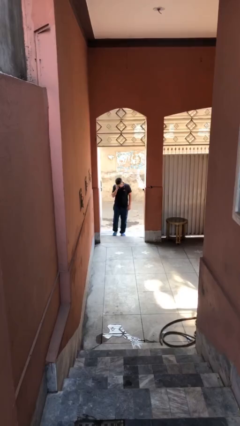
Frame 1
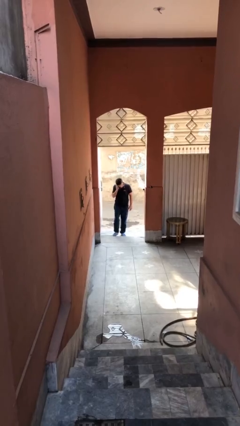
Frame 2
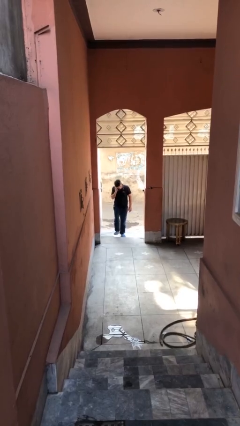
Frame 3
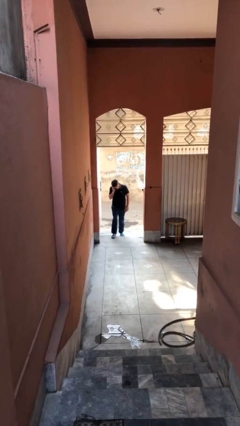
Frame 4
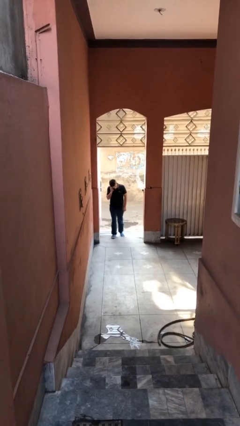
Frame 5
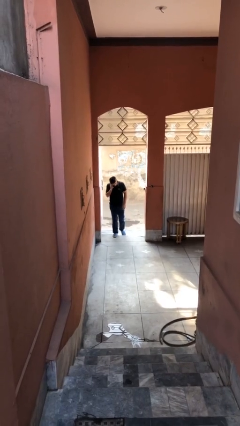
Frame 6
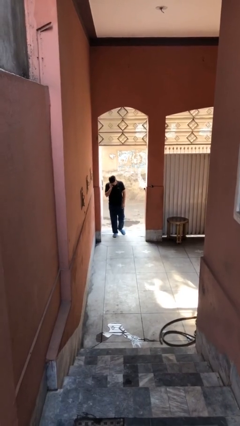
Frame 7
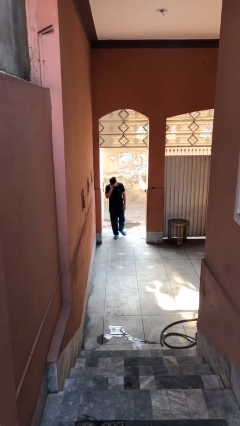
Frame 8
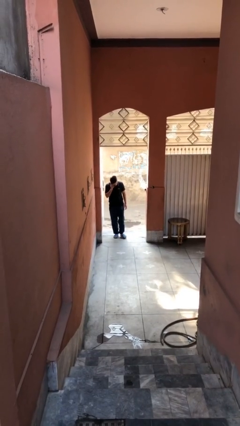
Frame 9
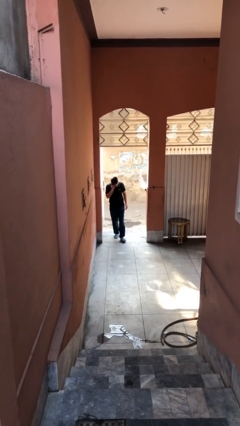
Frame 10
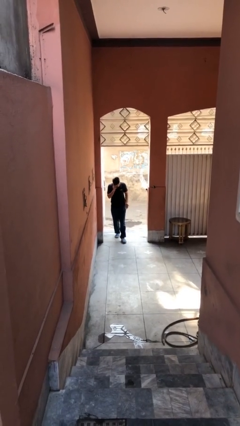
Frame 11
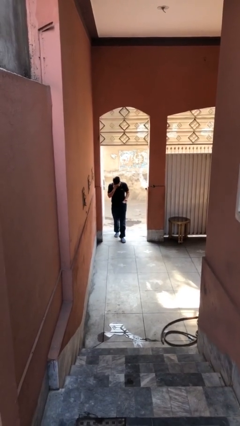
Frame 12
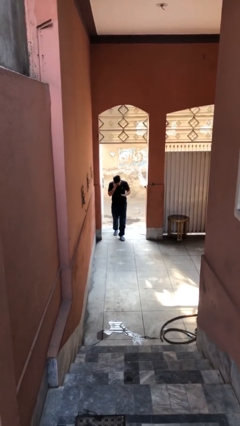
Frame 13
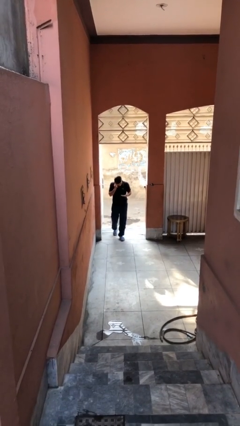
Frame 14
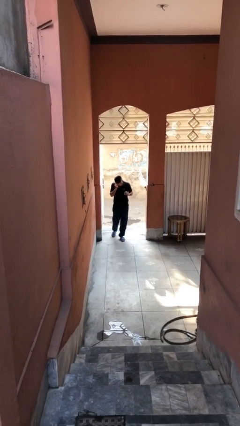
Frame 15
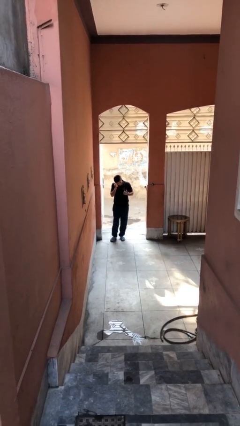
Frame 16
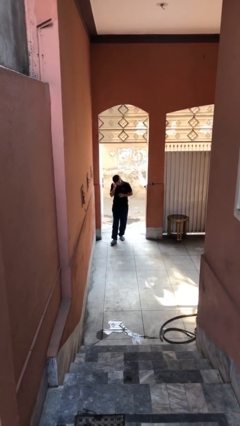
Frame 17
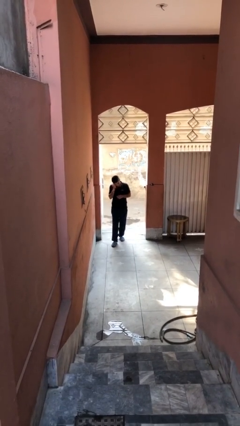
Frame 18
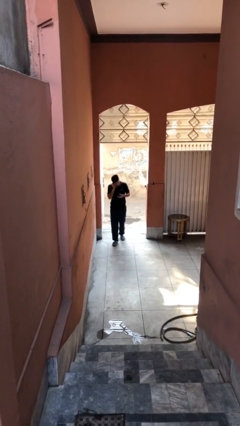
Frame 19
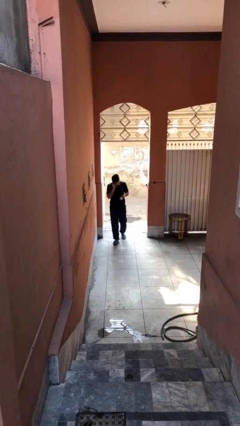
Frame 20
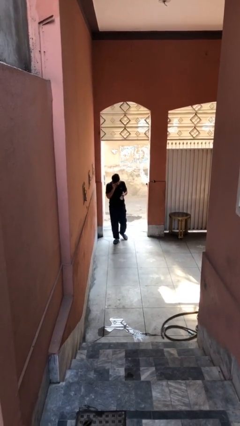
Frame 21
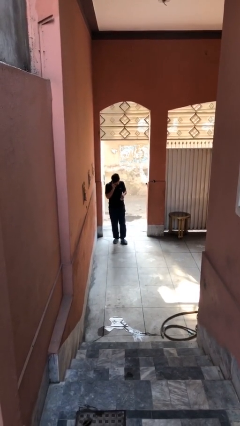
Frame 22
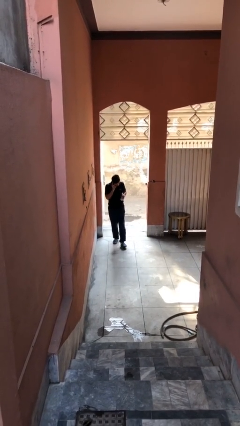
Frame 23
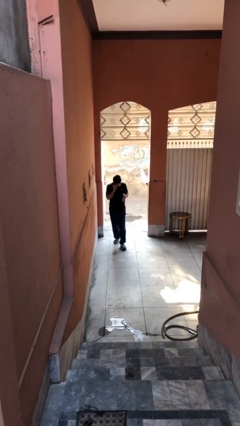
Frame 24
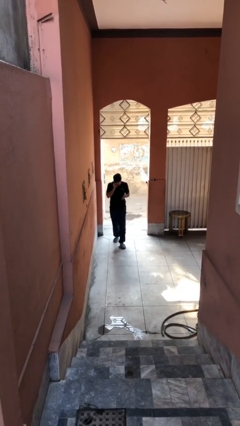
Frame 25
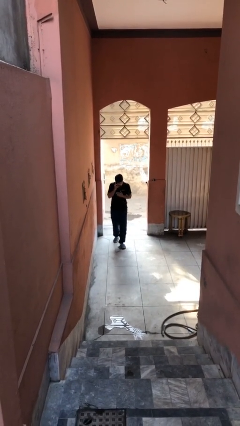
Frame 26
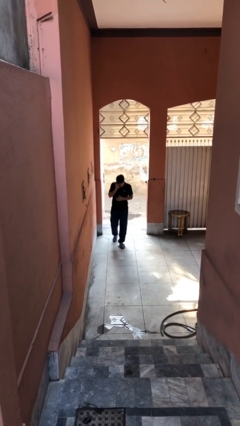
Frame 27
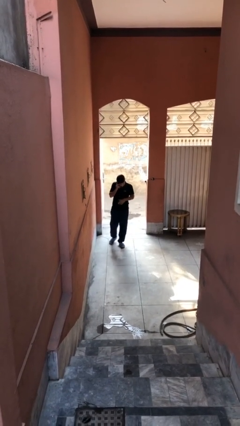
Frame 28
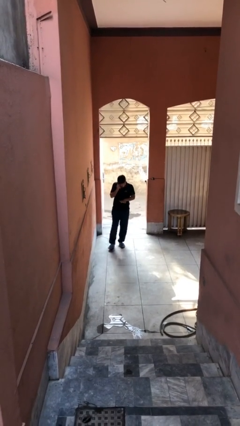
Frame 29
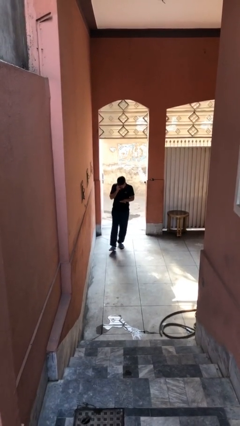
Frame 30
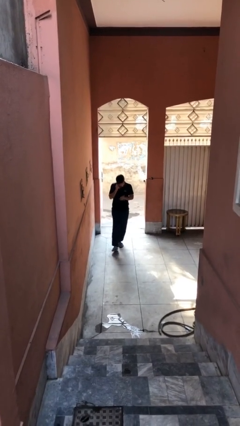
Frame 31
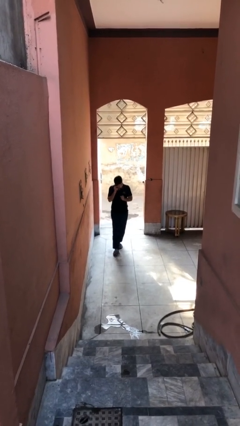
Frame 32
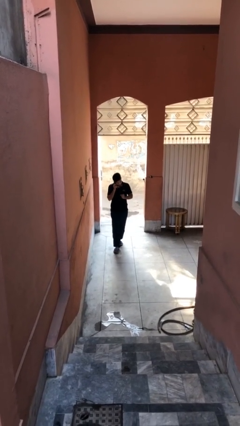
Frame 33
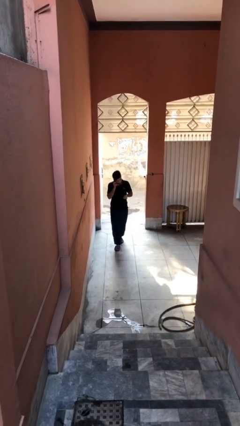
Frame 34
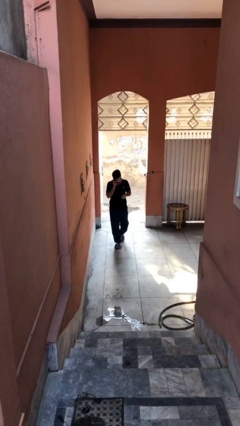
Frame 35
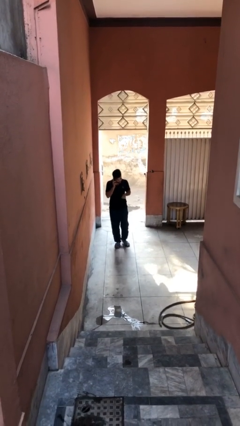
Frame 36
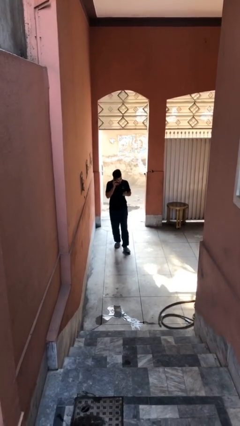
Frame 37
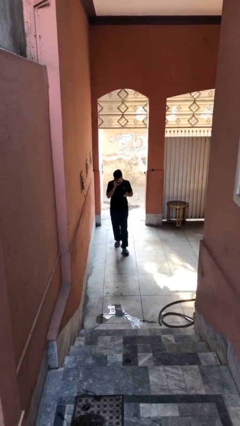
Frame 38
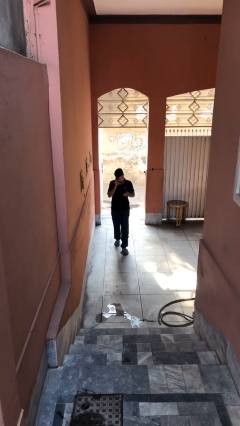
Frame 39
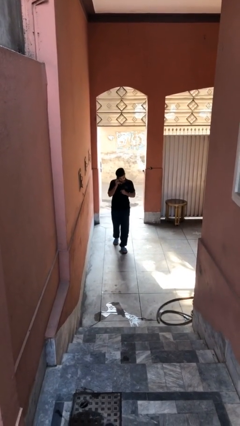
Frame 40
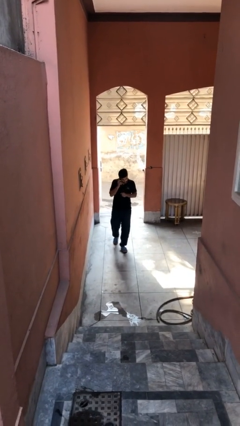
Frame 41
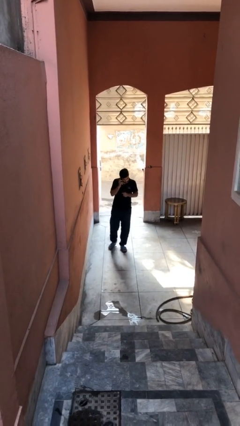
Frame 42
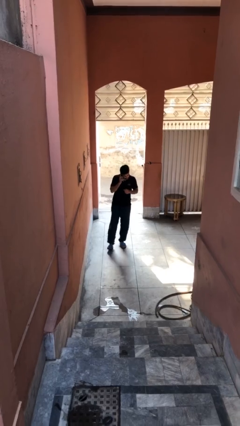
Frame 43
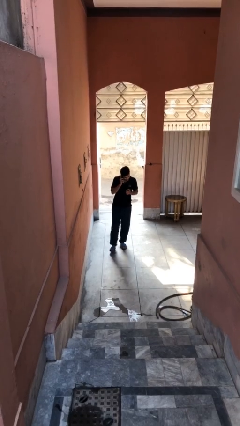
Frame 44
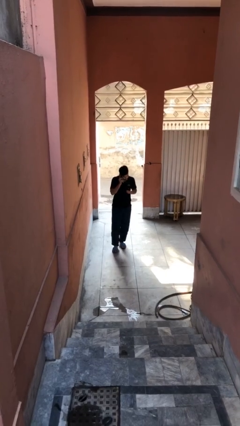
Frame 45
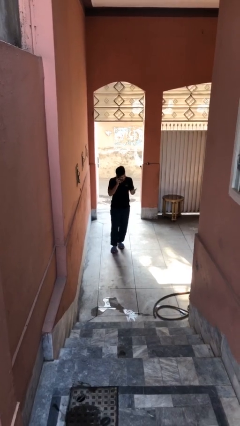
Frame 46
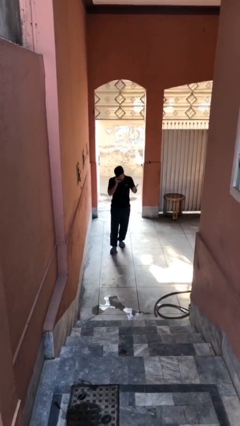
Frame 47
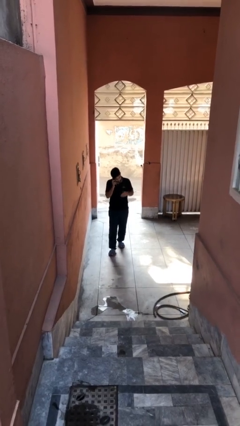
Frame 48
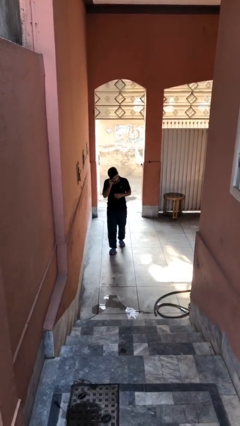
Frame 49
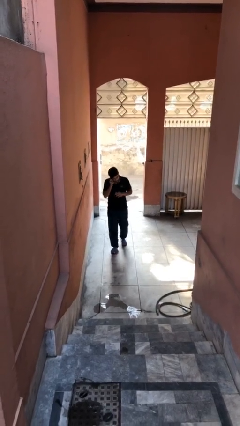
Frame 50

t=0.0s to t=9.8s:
person enters scene through structure

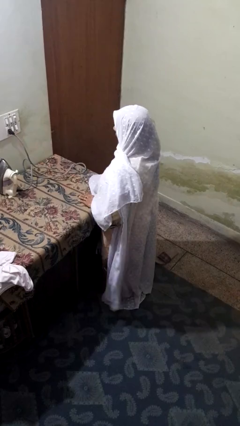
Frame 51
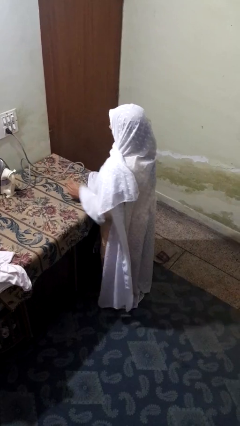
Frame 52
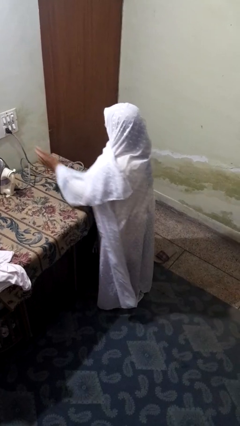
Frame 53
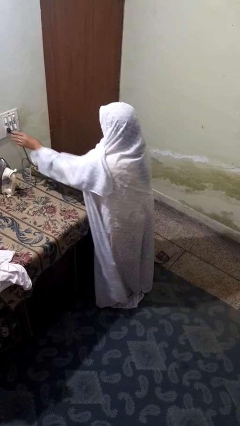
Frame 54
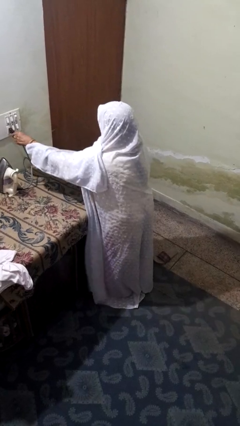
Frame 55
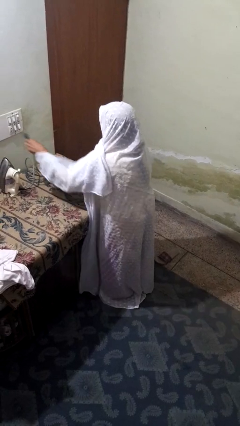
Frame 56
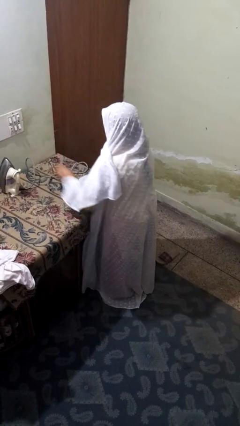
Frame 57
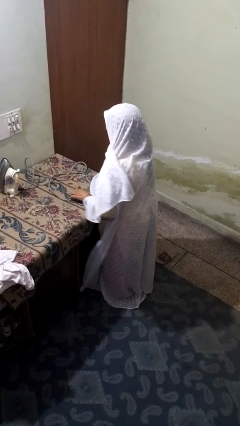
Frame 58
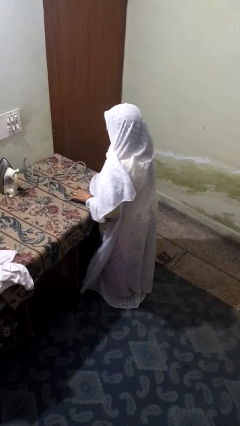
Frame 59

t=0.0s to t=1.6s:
person unplugs from electrical socket

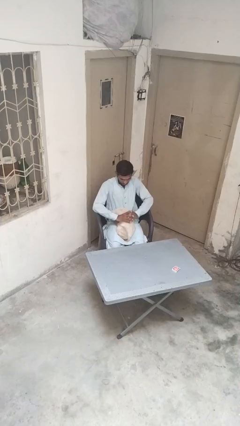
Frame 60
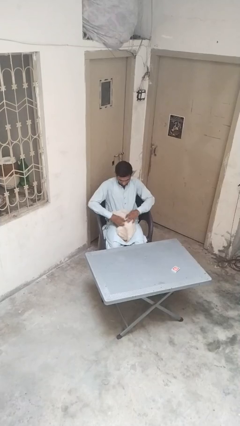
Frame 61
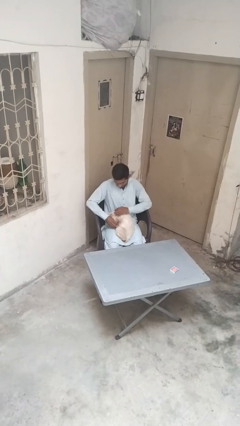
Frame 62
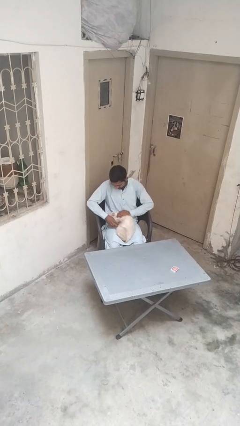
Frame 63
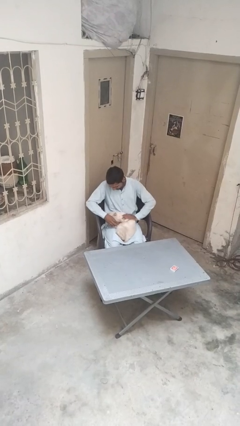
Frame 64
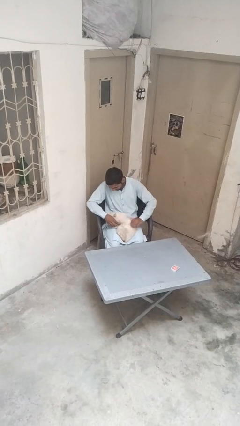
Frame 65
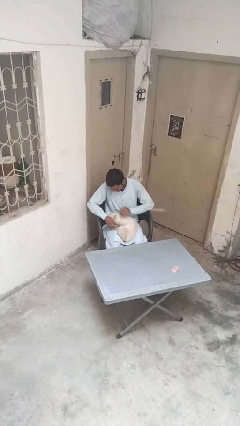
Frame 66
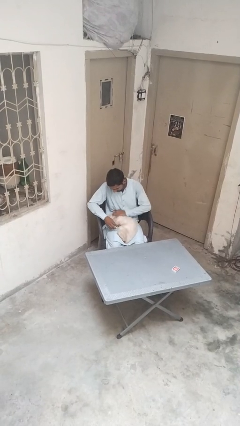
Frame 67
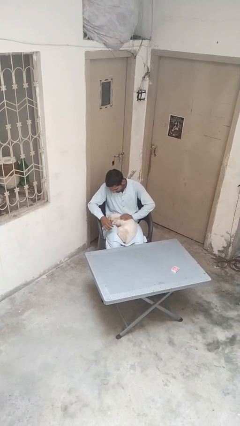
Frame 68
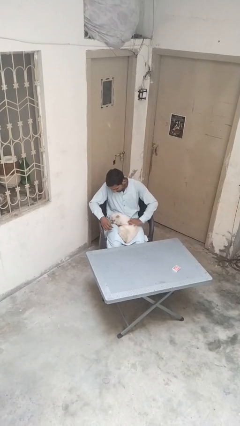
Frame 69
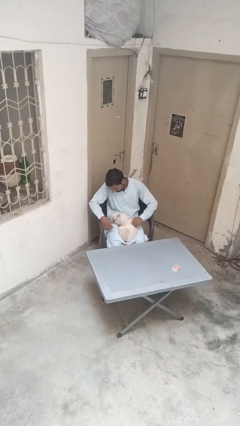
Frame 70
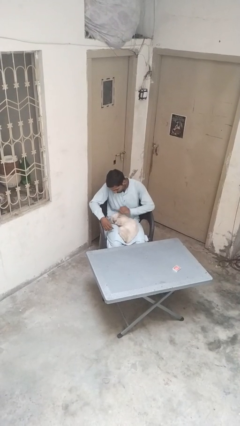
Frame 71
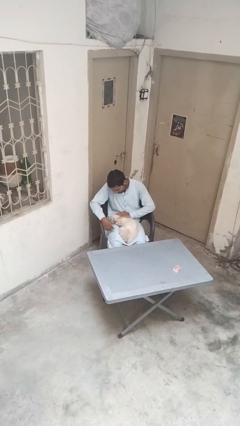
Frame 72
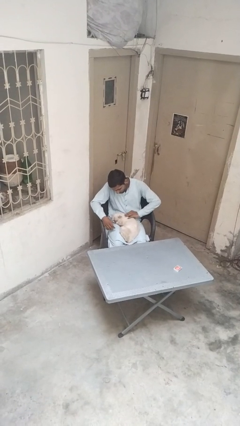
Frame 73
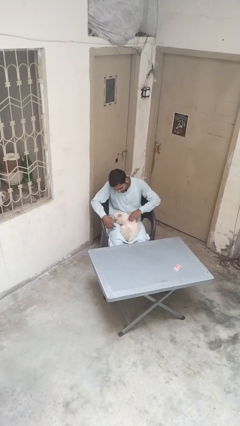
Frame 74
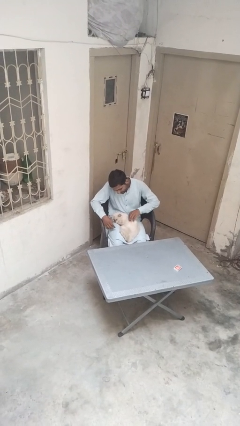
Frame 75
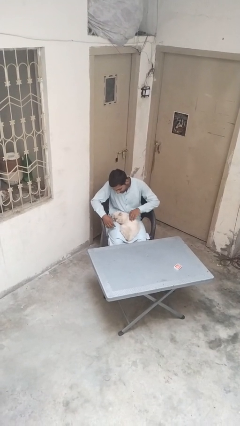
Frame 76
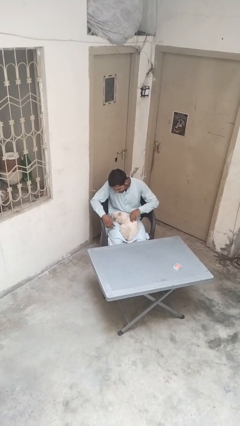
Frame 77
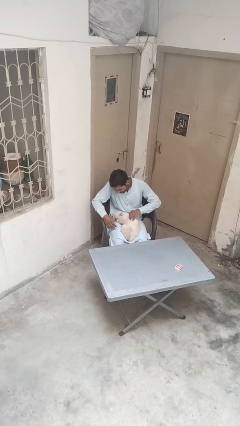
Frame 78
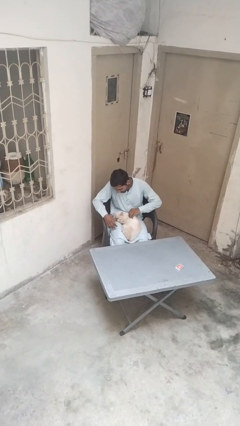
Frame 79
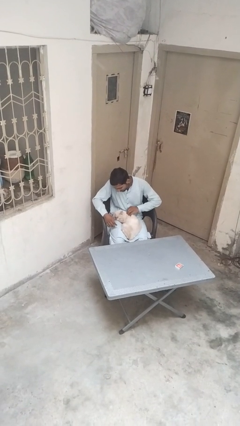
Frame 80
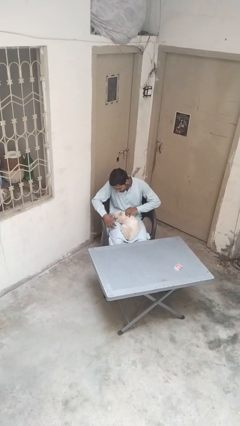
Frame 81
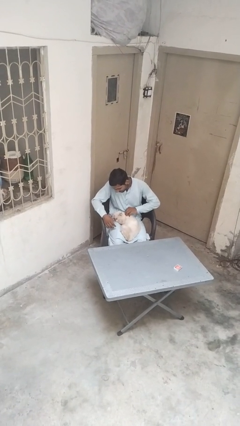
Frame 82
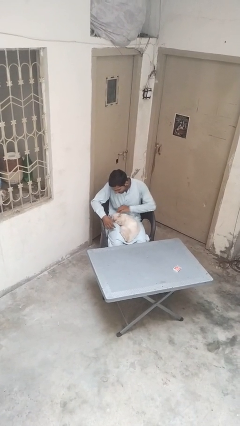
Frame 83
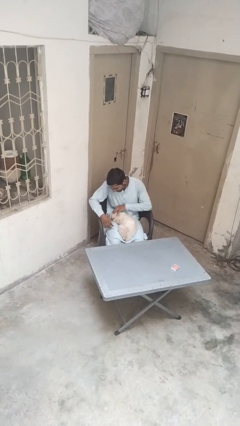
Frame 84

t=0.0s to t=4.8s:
person pets cat

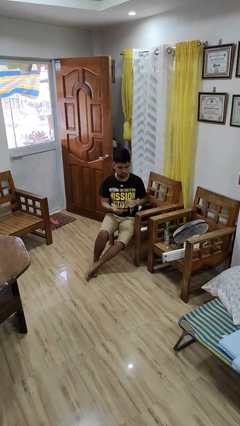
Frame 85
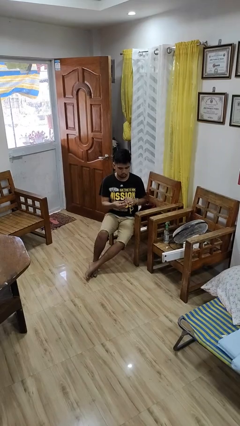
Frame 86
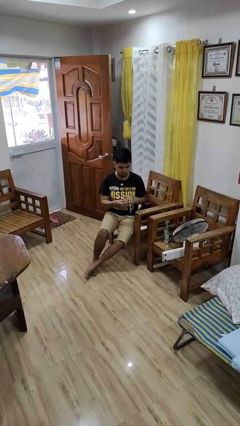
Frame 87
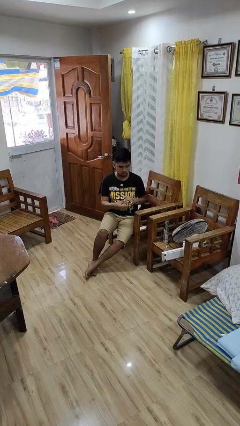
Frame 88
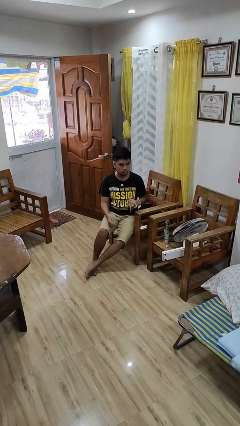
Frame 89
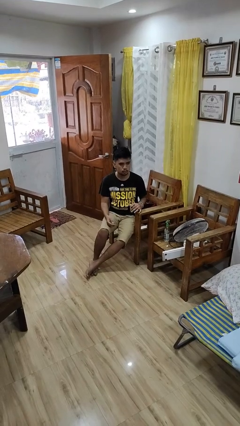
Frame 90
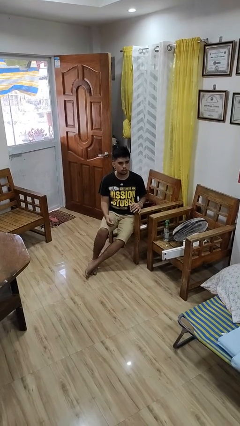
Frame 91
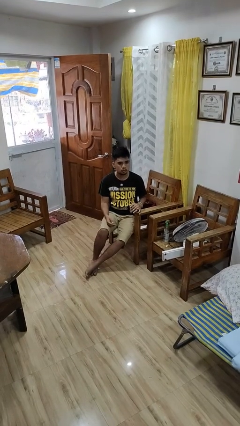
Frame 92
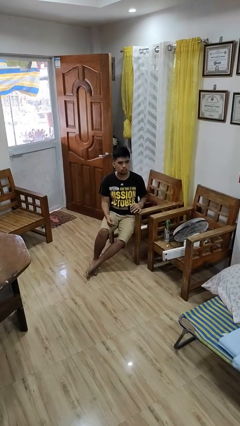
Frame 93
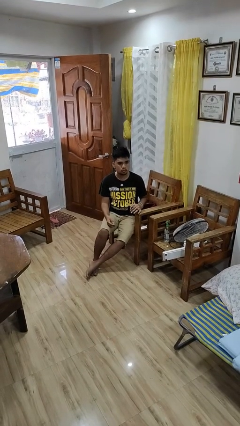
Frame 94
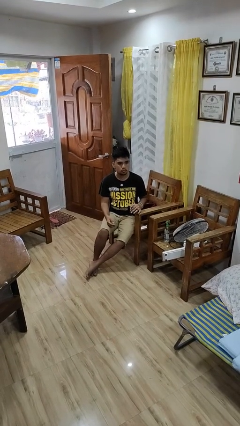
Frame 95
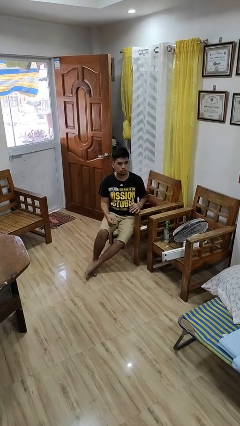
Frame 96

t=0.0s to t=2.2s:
person puts on ring
